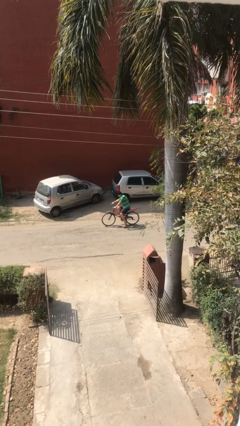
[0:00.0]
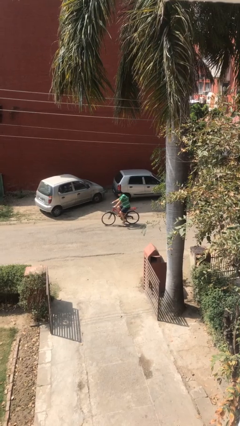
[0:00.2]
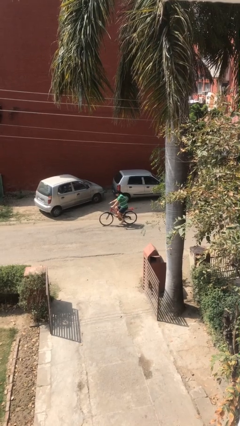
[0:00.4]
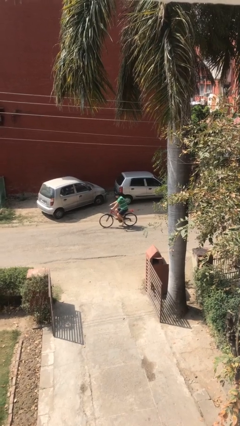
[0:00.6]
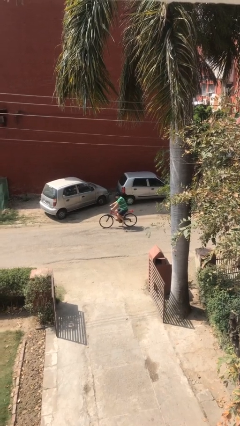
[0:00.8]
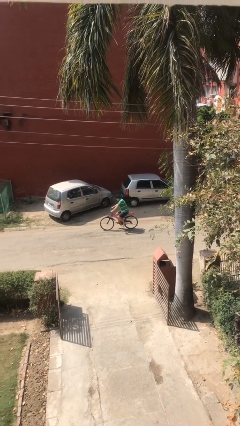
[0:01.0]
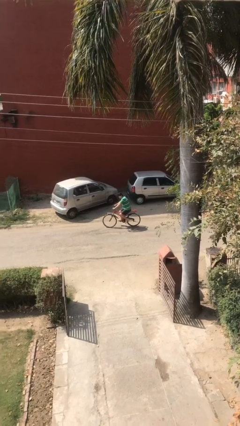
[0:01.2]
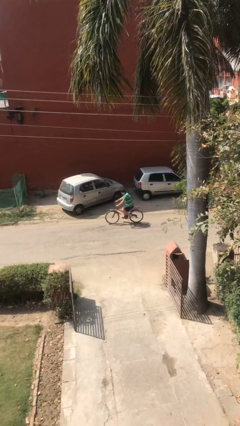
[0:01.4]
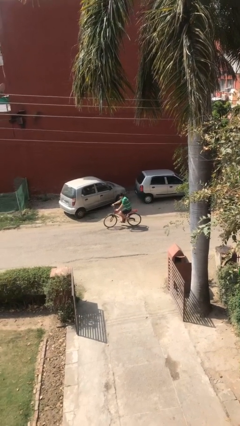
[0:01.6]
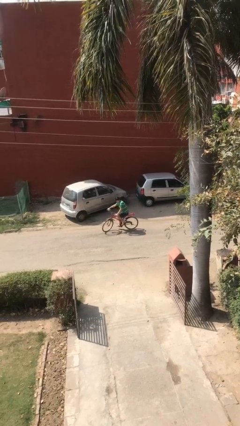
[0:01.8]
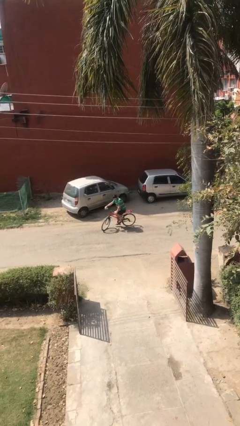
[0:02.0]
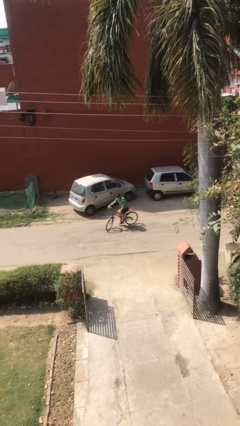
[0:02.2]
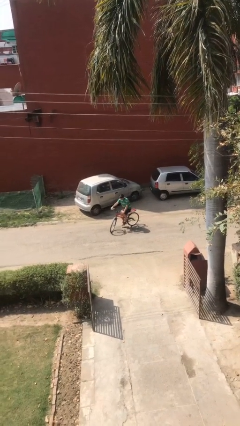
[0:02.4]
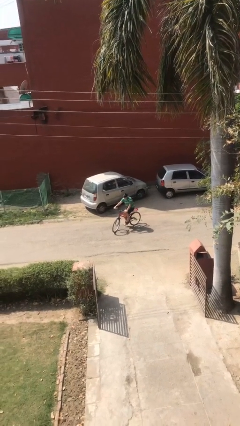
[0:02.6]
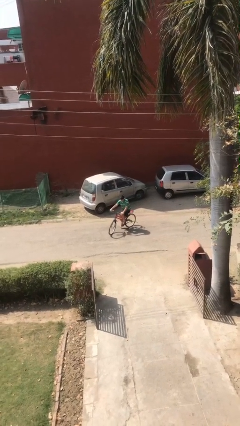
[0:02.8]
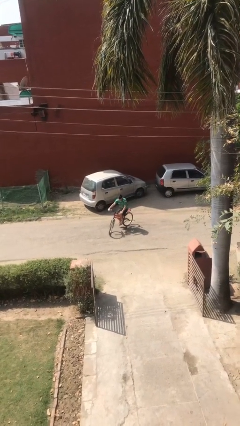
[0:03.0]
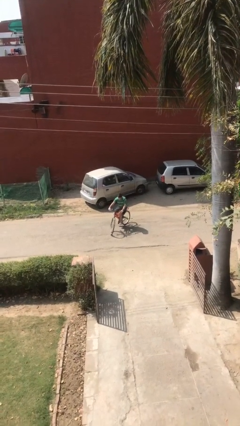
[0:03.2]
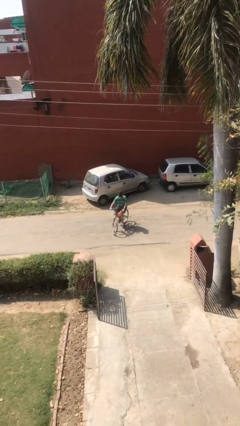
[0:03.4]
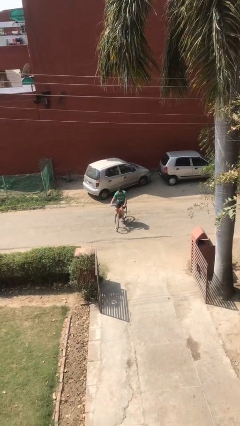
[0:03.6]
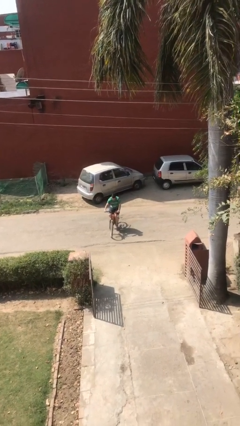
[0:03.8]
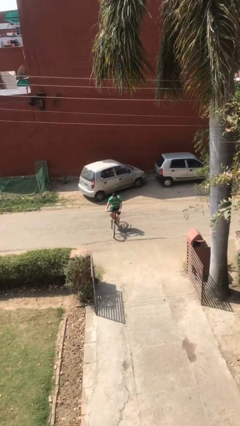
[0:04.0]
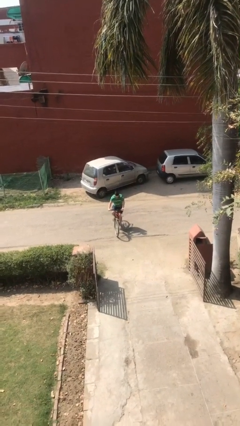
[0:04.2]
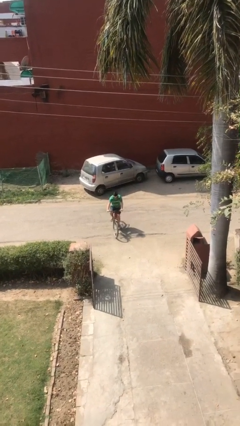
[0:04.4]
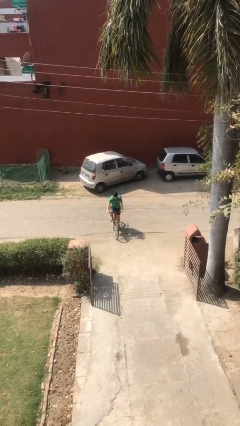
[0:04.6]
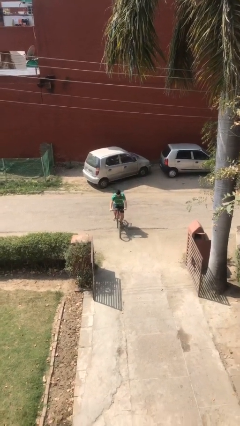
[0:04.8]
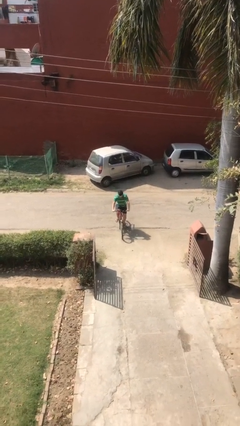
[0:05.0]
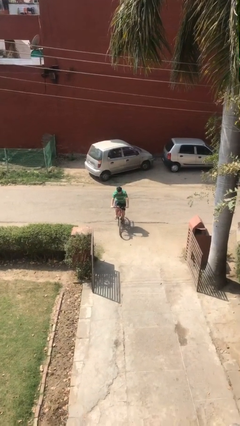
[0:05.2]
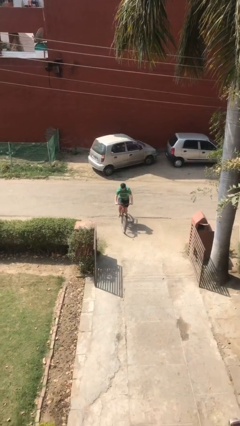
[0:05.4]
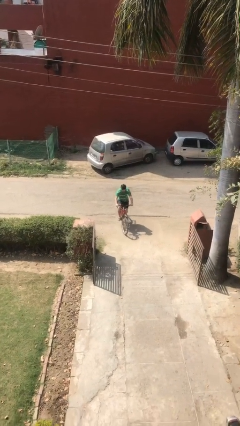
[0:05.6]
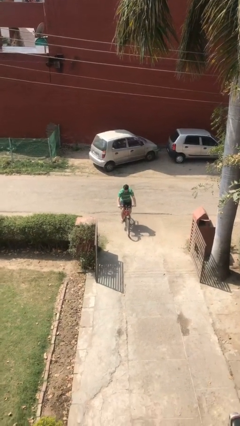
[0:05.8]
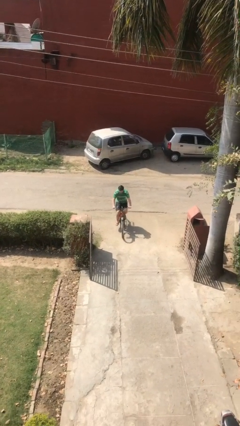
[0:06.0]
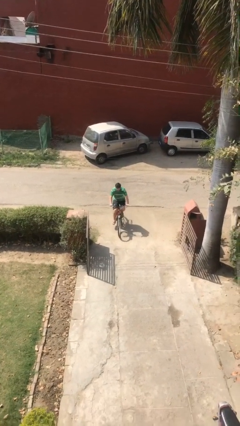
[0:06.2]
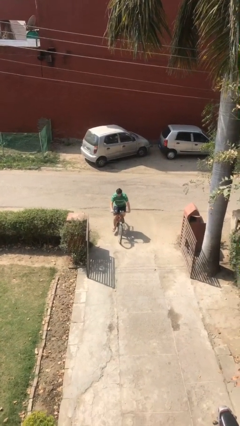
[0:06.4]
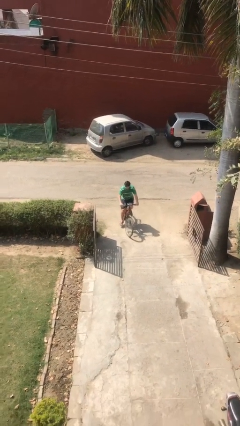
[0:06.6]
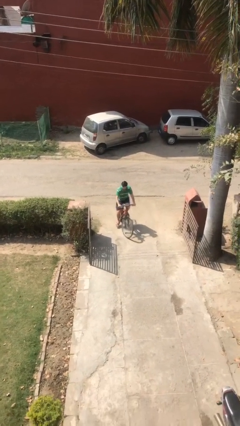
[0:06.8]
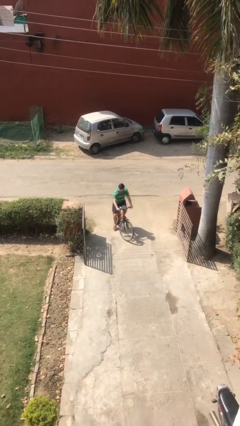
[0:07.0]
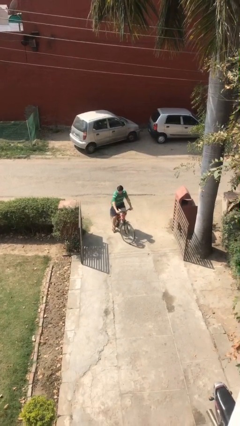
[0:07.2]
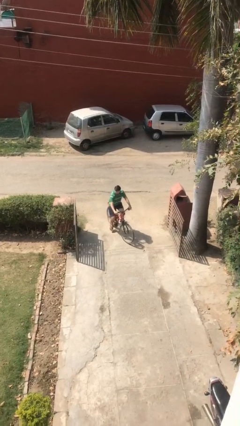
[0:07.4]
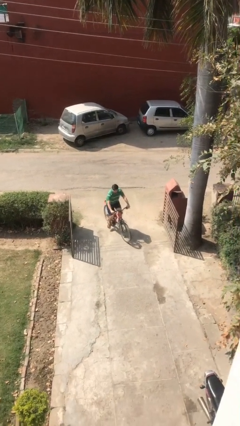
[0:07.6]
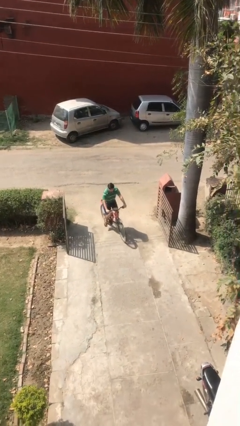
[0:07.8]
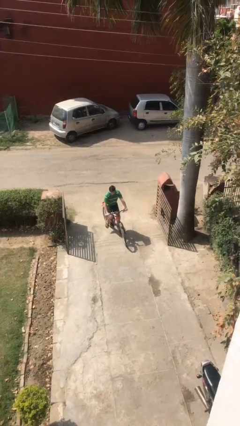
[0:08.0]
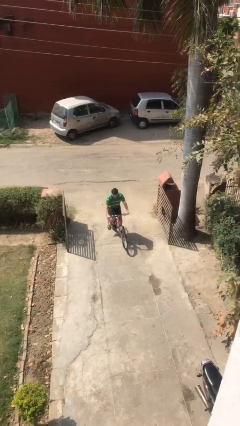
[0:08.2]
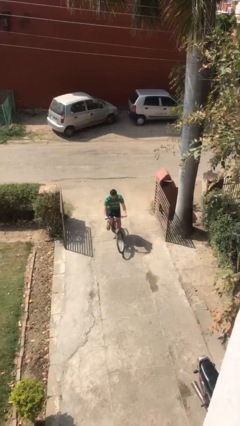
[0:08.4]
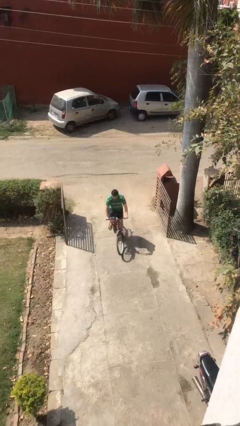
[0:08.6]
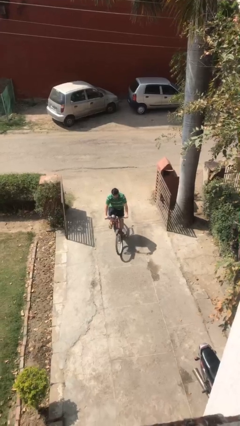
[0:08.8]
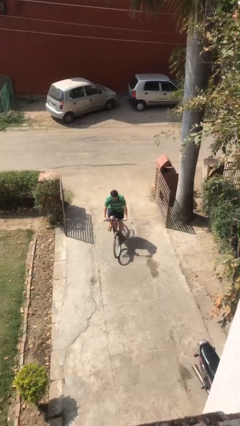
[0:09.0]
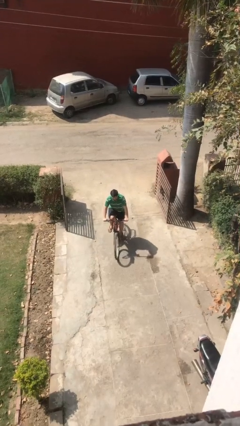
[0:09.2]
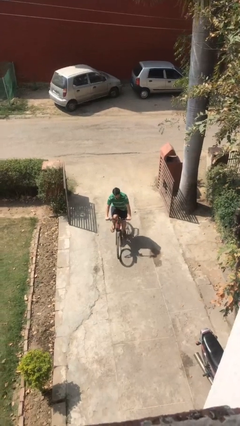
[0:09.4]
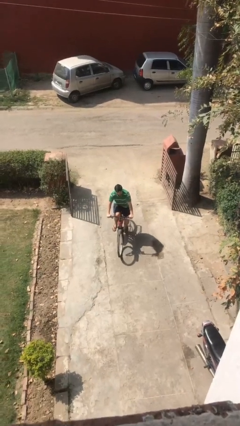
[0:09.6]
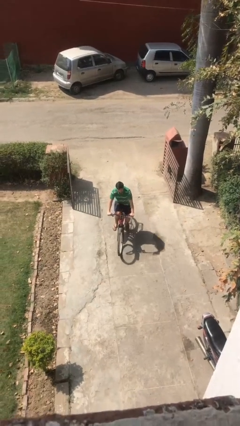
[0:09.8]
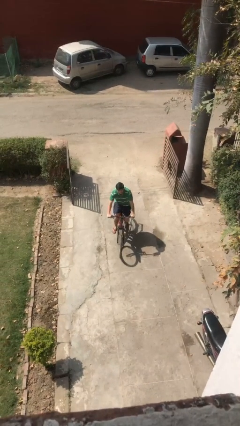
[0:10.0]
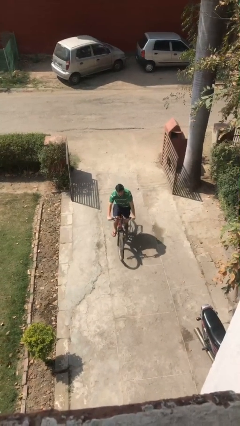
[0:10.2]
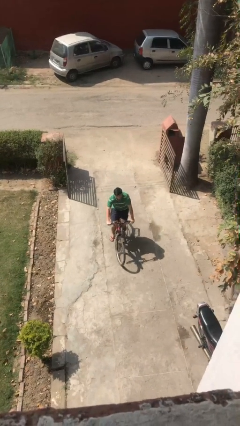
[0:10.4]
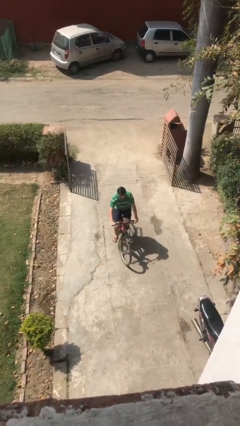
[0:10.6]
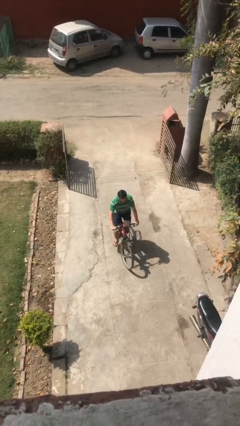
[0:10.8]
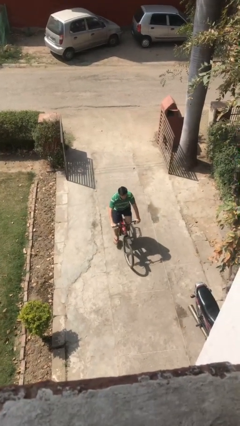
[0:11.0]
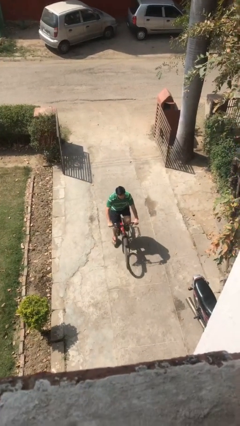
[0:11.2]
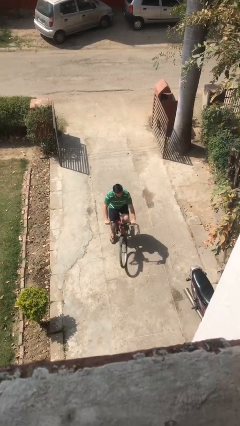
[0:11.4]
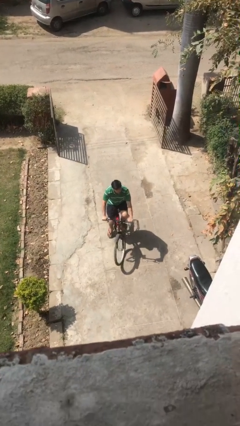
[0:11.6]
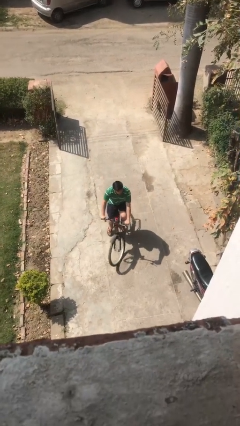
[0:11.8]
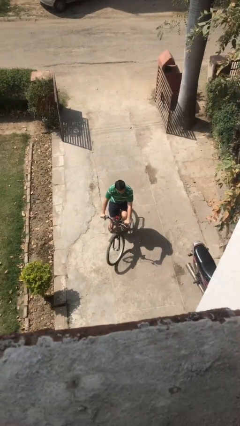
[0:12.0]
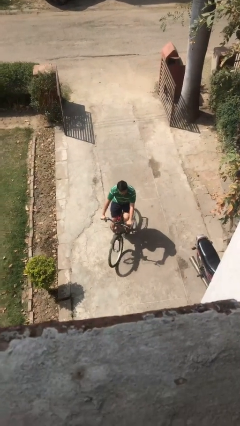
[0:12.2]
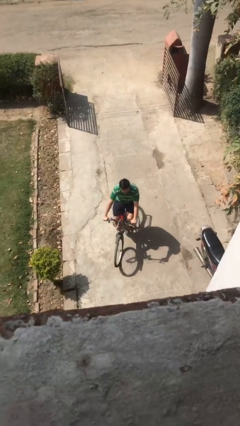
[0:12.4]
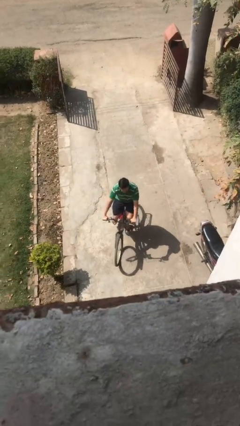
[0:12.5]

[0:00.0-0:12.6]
person rides bicycle

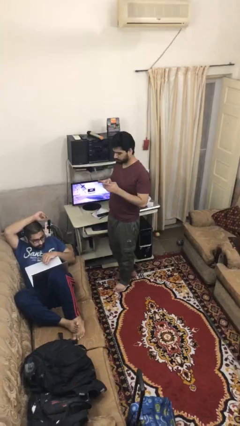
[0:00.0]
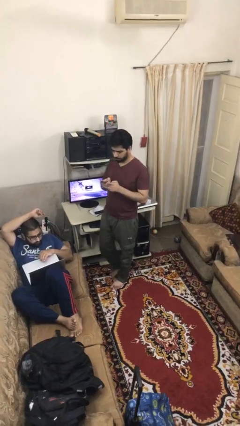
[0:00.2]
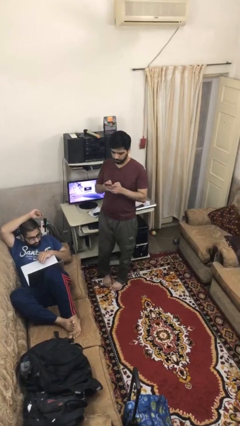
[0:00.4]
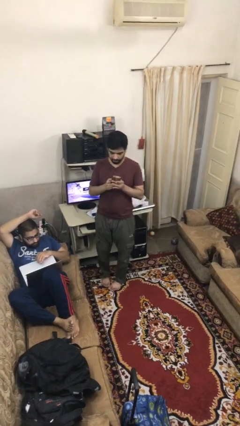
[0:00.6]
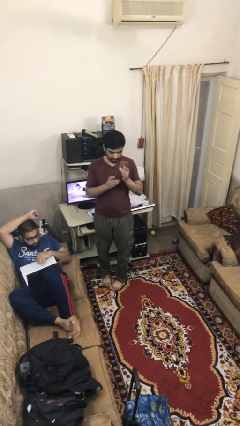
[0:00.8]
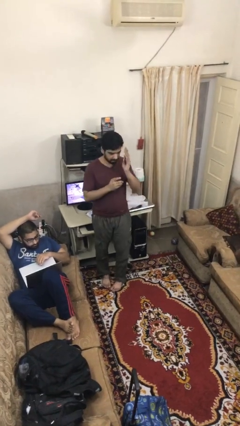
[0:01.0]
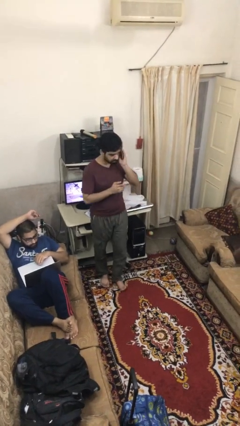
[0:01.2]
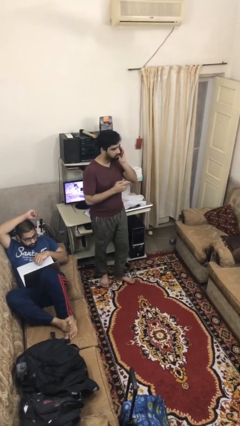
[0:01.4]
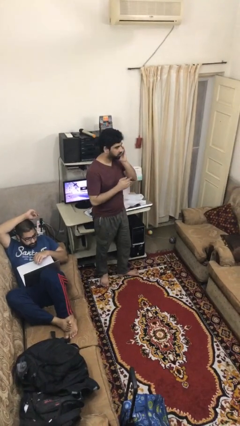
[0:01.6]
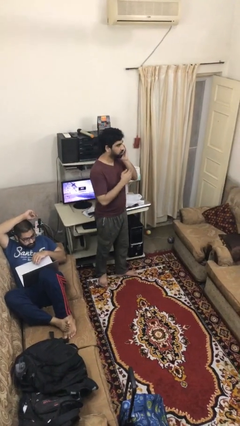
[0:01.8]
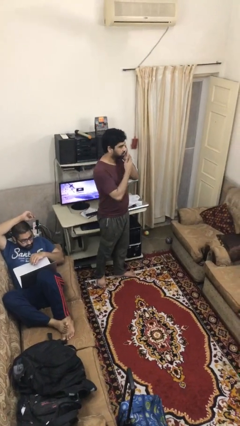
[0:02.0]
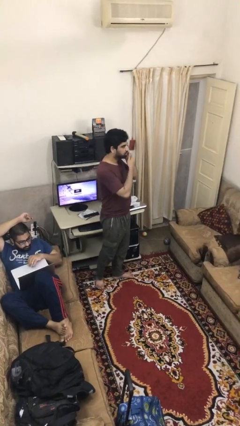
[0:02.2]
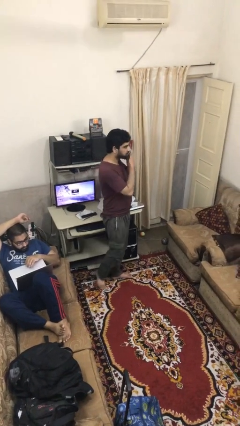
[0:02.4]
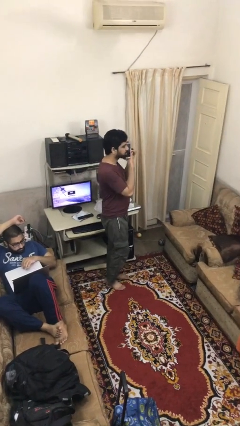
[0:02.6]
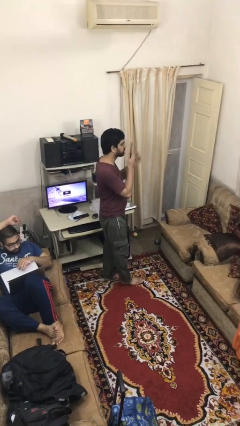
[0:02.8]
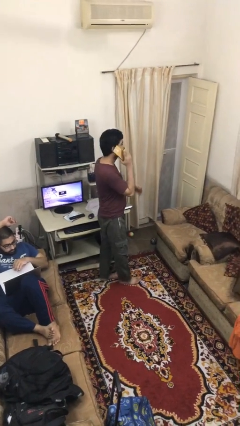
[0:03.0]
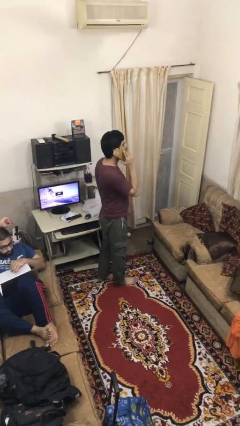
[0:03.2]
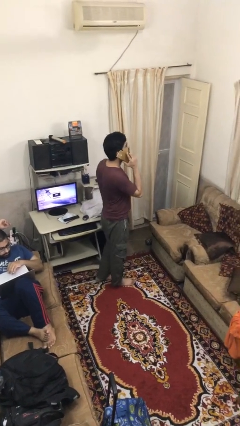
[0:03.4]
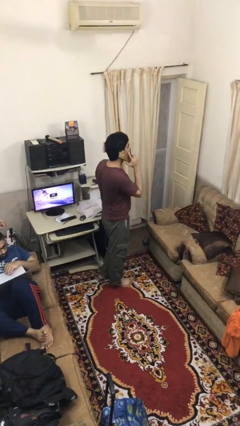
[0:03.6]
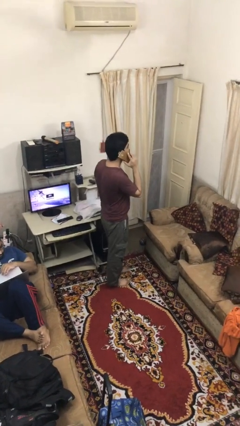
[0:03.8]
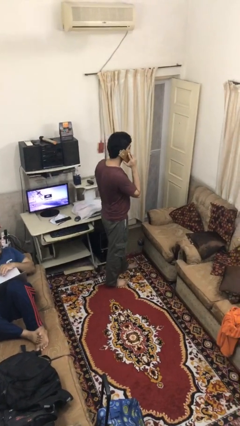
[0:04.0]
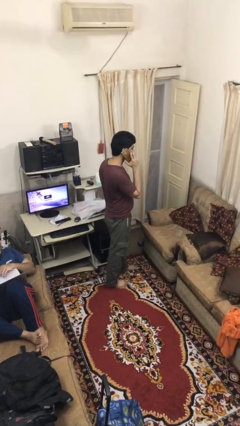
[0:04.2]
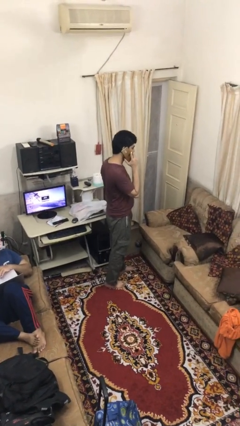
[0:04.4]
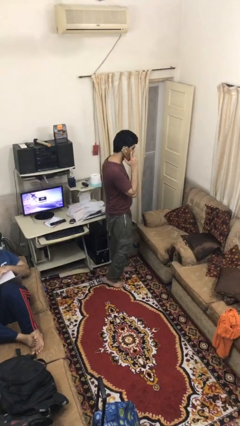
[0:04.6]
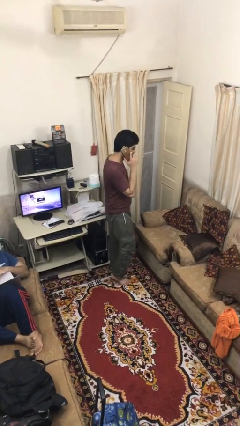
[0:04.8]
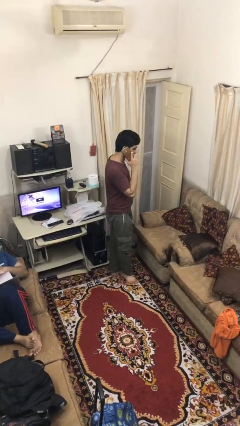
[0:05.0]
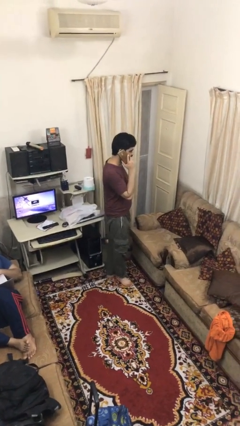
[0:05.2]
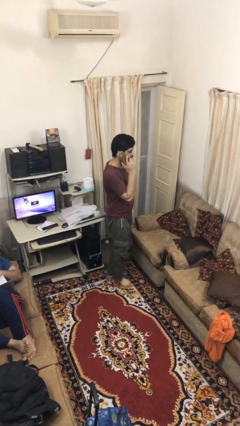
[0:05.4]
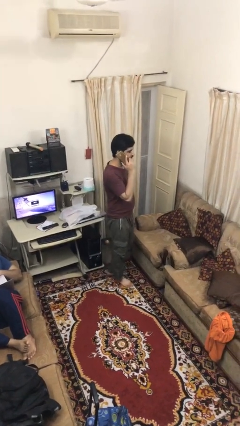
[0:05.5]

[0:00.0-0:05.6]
person talks on phone
